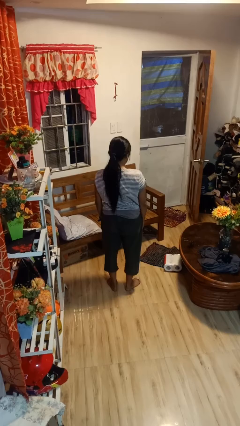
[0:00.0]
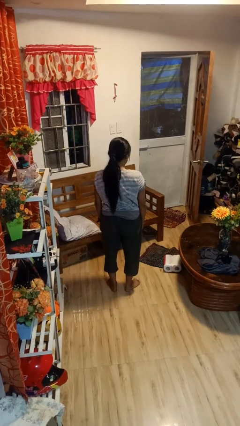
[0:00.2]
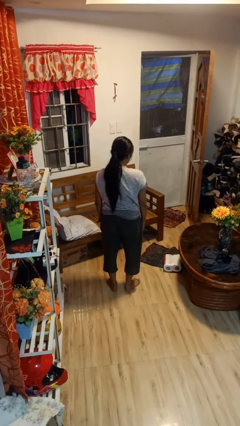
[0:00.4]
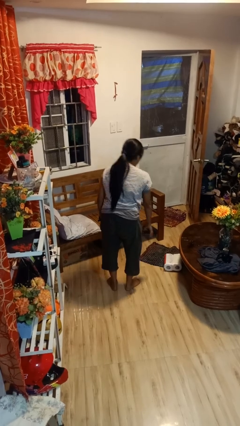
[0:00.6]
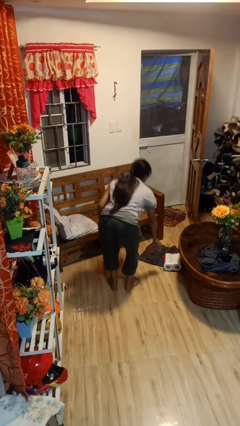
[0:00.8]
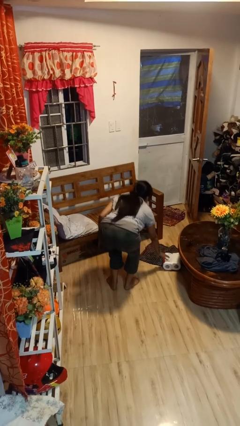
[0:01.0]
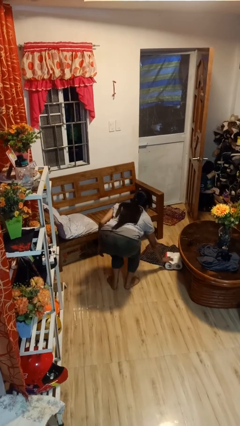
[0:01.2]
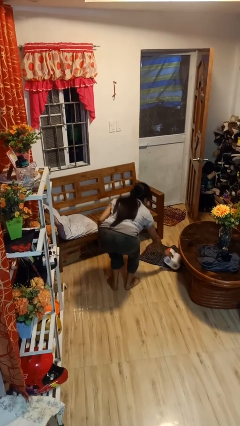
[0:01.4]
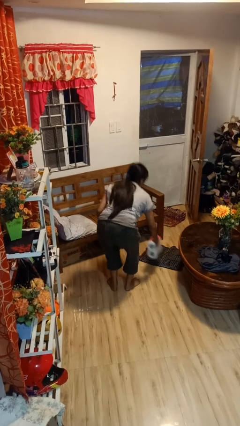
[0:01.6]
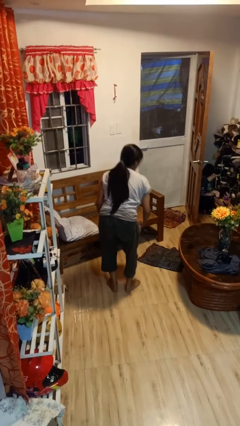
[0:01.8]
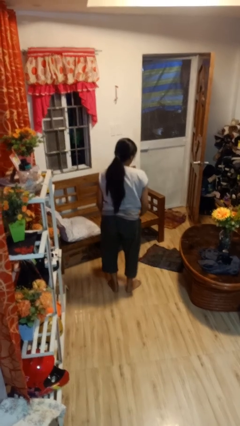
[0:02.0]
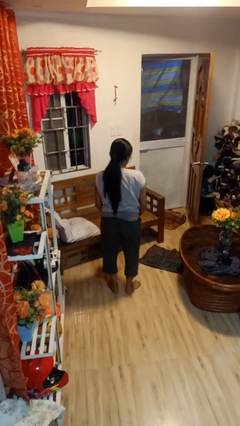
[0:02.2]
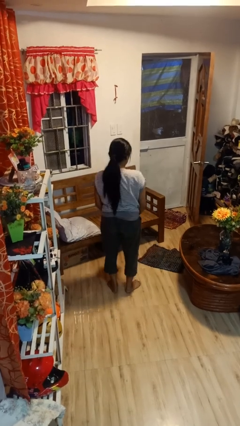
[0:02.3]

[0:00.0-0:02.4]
person picks up object from floor

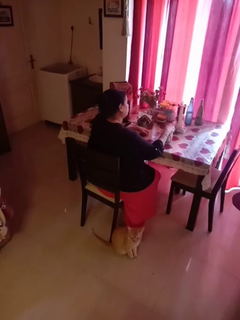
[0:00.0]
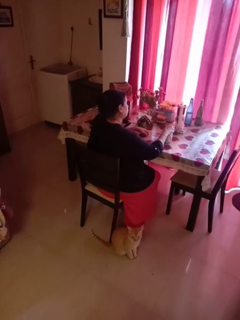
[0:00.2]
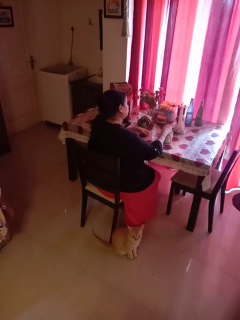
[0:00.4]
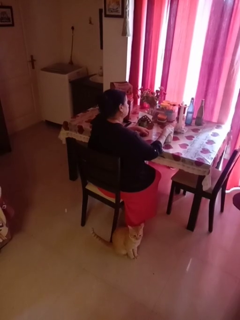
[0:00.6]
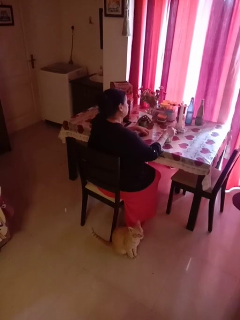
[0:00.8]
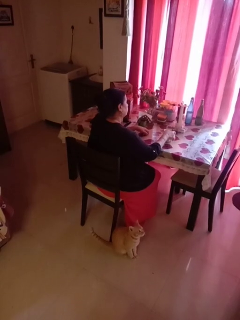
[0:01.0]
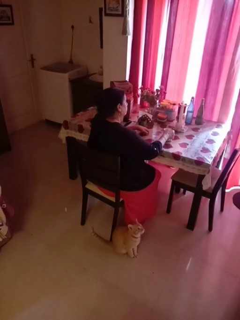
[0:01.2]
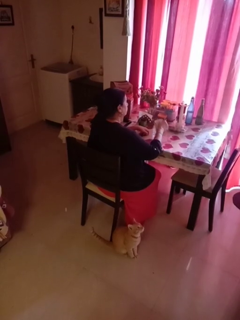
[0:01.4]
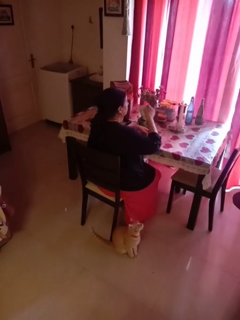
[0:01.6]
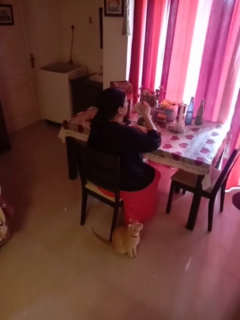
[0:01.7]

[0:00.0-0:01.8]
person stirs mug

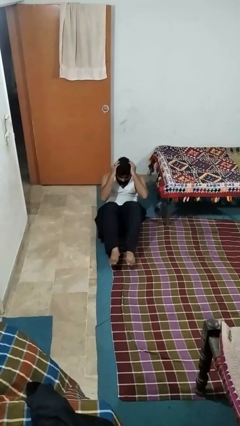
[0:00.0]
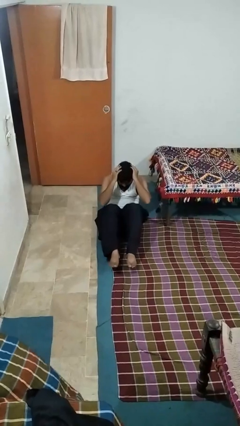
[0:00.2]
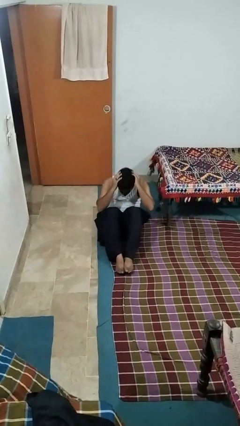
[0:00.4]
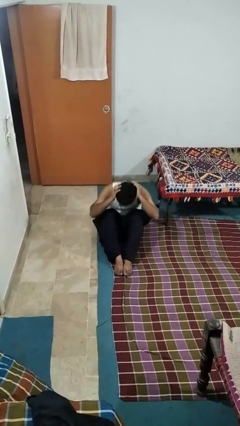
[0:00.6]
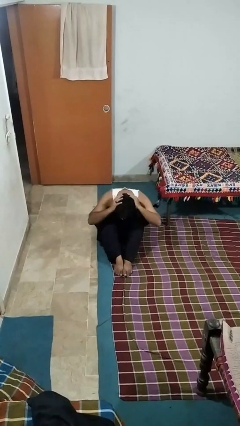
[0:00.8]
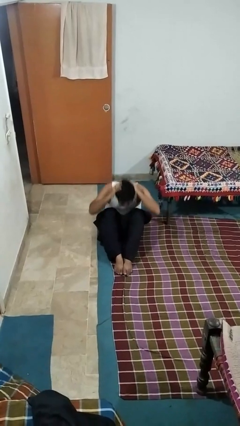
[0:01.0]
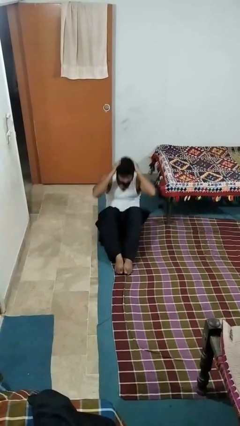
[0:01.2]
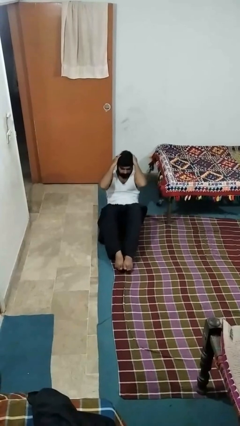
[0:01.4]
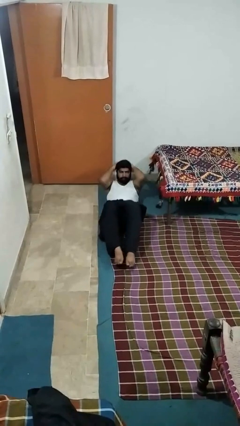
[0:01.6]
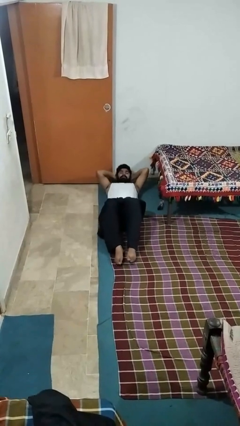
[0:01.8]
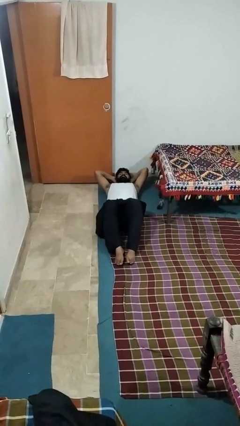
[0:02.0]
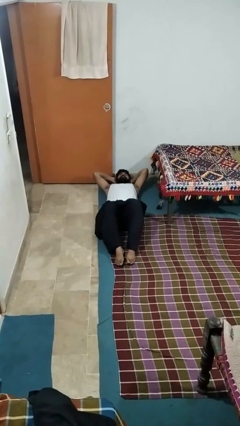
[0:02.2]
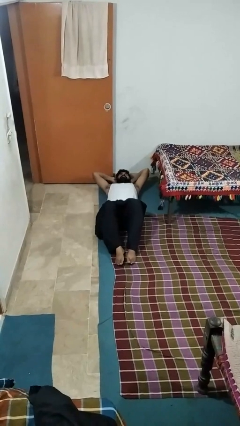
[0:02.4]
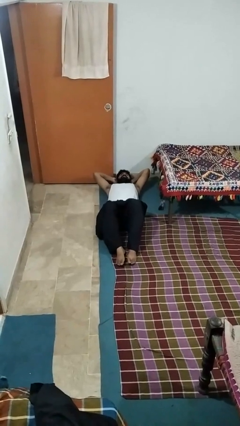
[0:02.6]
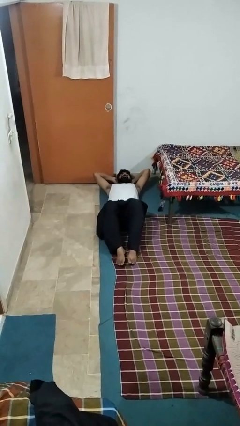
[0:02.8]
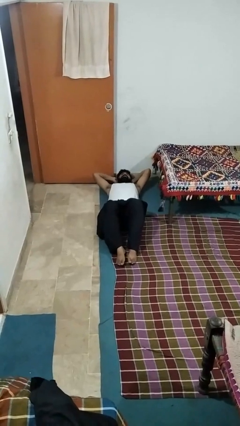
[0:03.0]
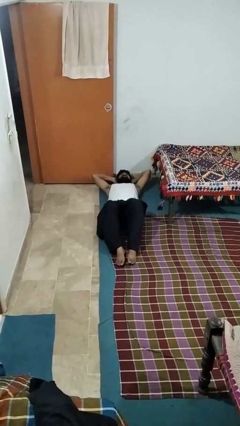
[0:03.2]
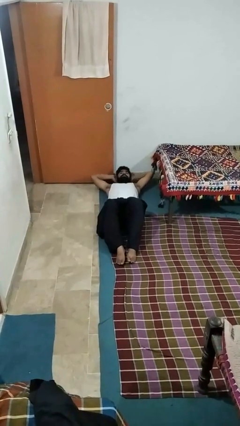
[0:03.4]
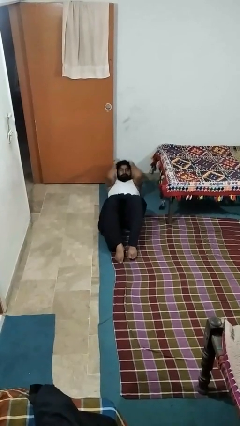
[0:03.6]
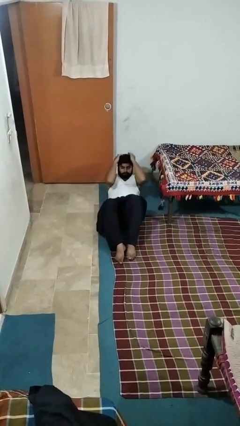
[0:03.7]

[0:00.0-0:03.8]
person exercises with situp

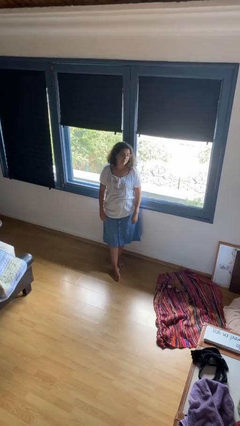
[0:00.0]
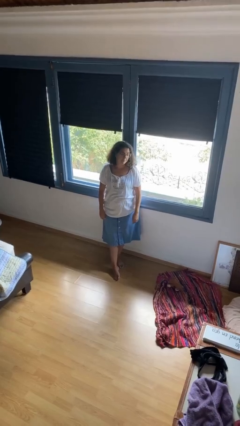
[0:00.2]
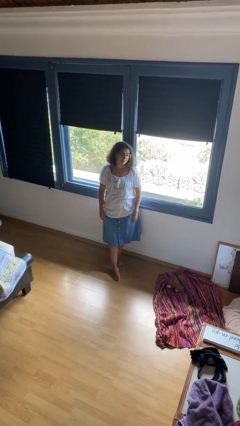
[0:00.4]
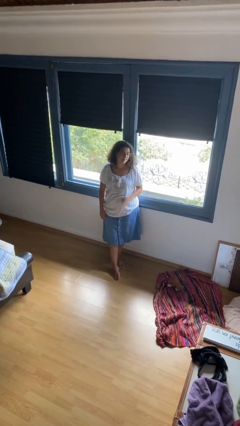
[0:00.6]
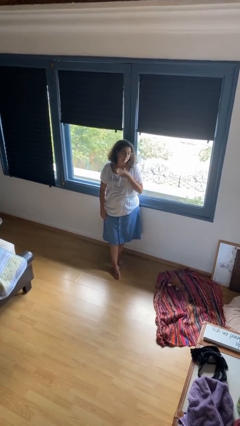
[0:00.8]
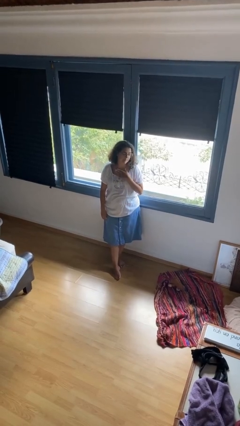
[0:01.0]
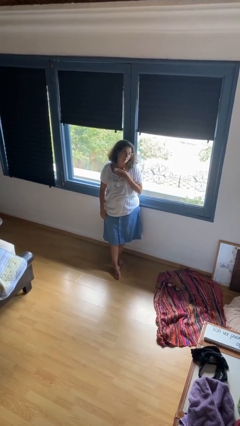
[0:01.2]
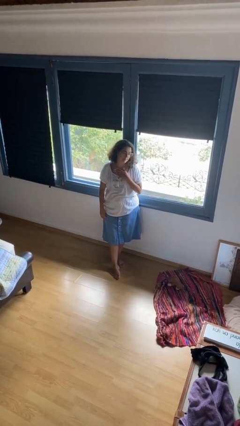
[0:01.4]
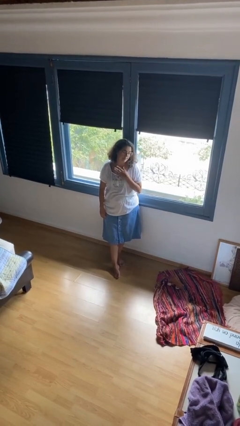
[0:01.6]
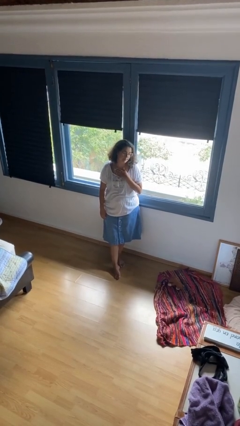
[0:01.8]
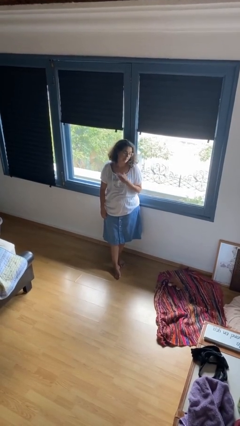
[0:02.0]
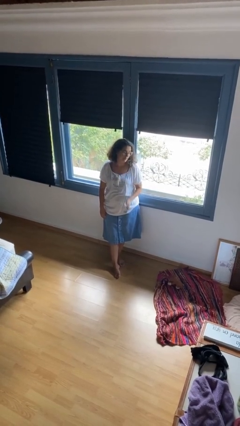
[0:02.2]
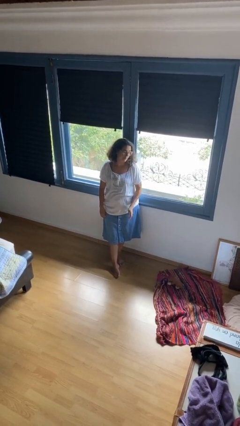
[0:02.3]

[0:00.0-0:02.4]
person drums on chest

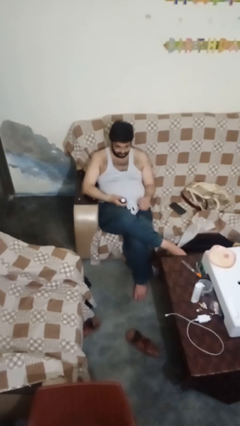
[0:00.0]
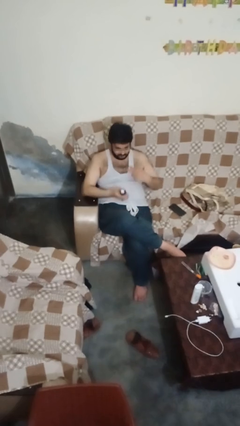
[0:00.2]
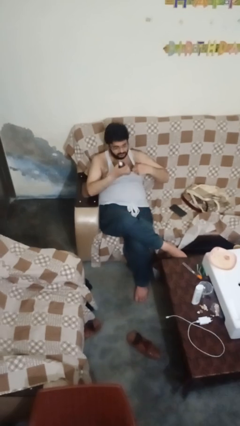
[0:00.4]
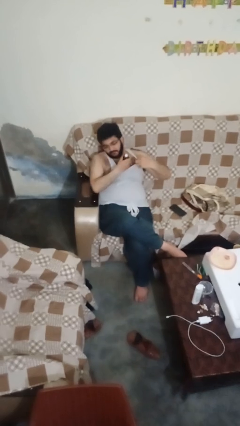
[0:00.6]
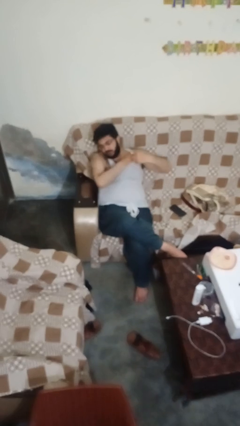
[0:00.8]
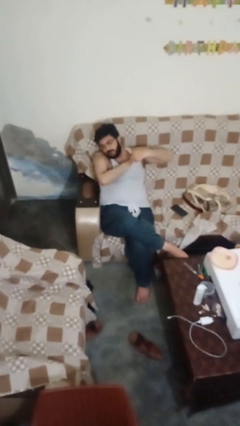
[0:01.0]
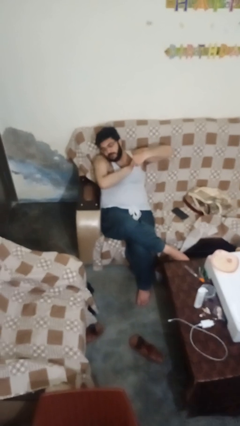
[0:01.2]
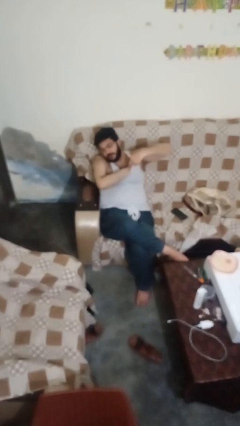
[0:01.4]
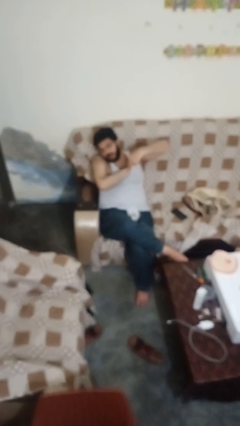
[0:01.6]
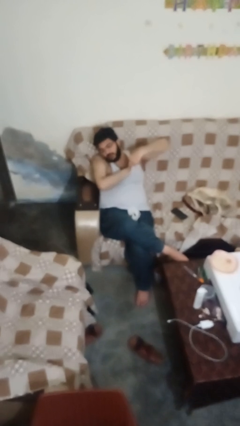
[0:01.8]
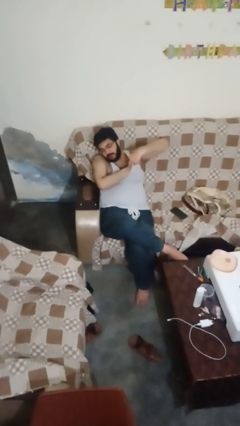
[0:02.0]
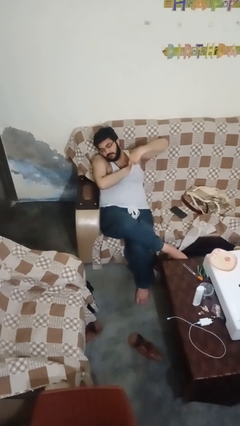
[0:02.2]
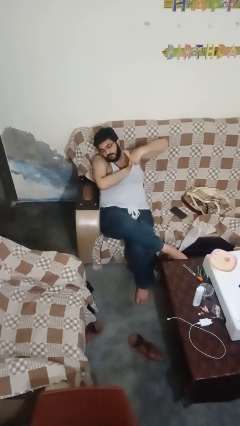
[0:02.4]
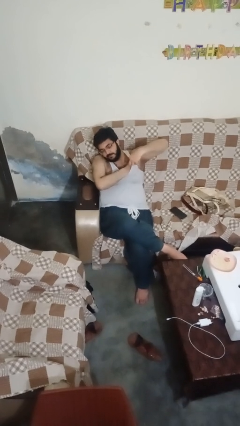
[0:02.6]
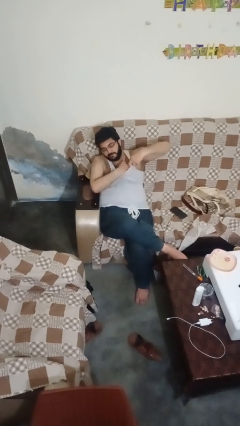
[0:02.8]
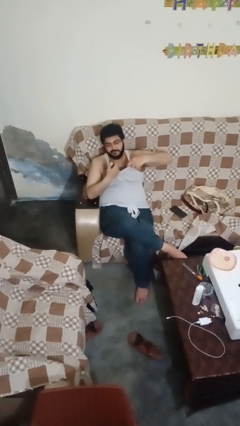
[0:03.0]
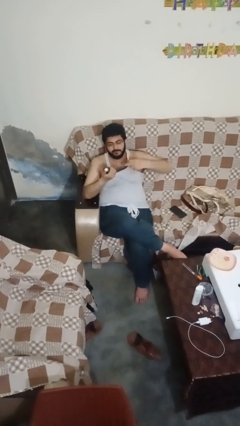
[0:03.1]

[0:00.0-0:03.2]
person applies deodorant

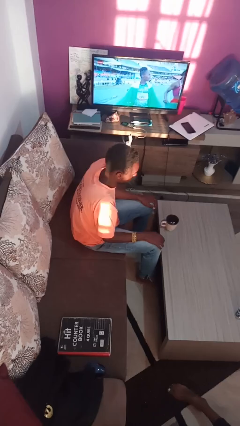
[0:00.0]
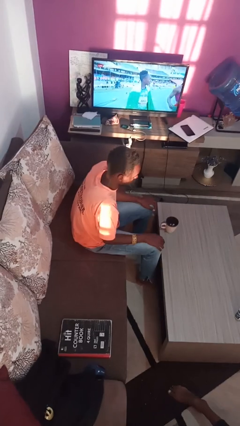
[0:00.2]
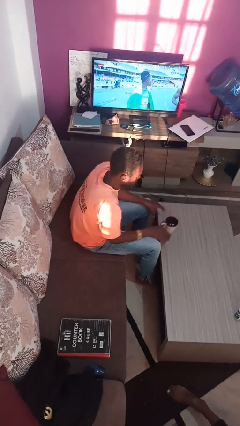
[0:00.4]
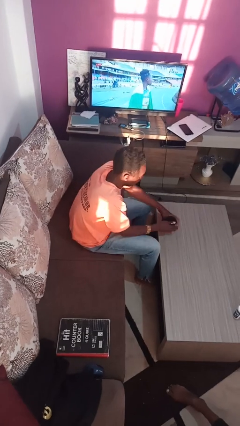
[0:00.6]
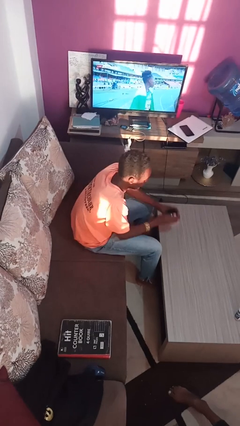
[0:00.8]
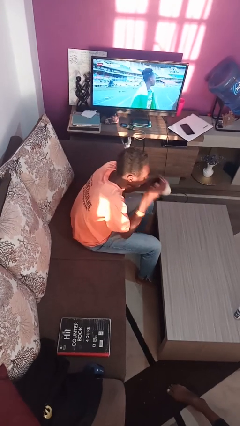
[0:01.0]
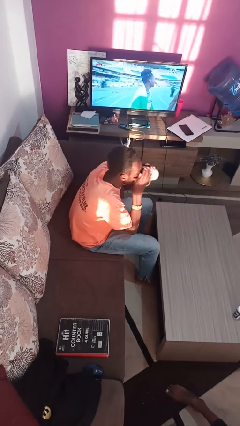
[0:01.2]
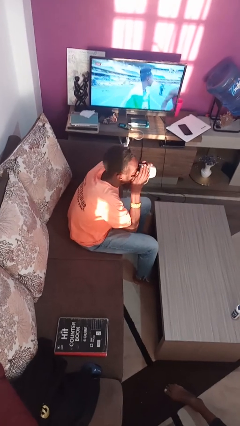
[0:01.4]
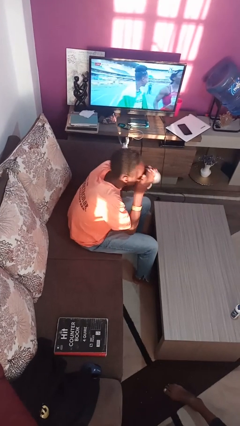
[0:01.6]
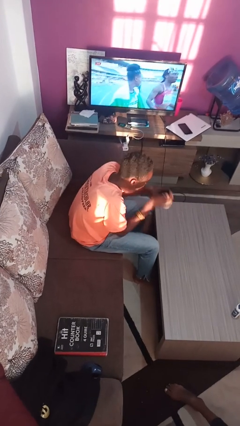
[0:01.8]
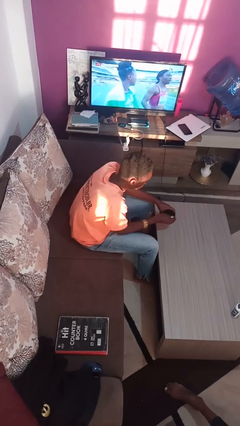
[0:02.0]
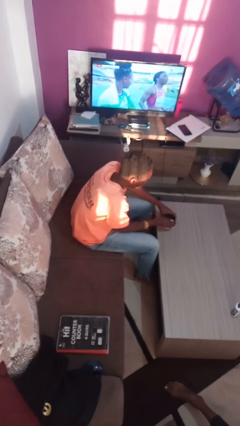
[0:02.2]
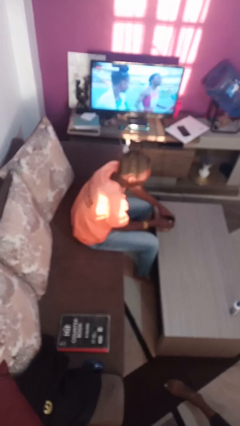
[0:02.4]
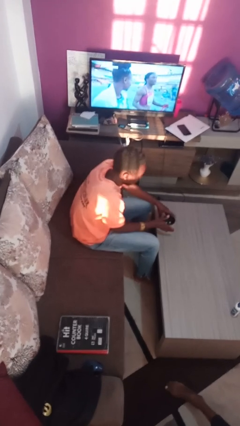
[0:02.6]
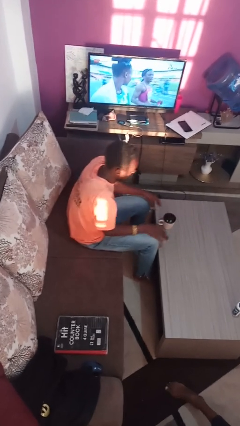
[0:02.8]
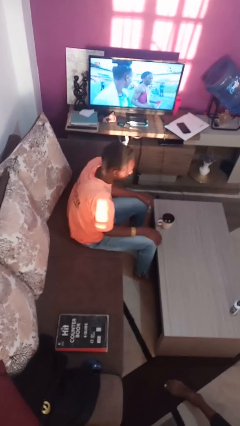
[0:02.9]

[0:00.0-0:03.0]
person drinks from mug

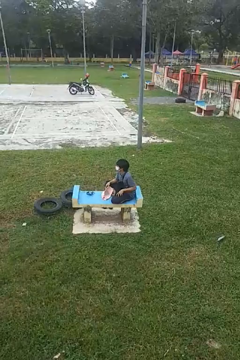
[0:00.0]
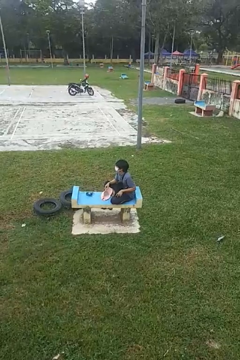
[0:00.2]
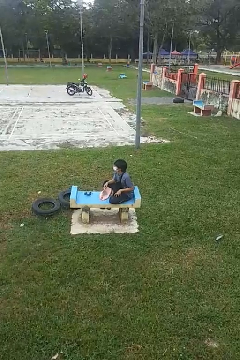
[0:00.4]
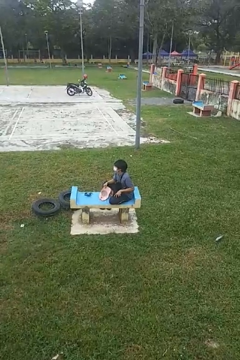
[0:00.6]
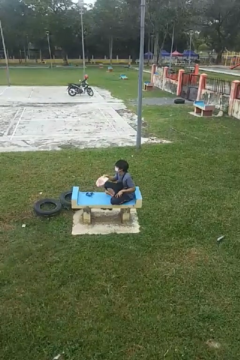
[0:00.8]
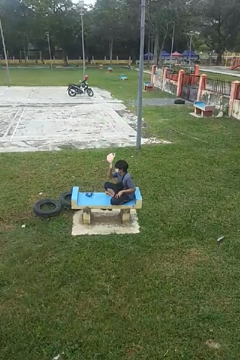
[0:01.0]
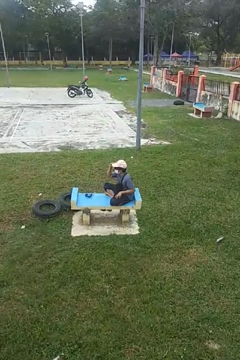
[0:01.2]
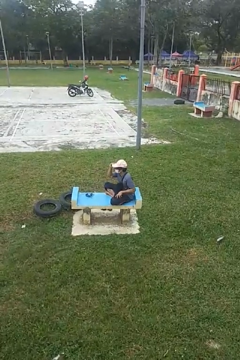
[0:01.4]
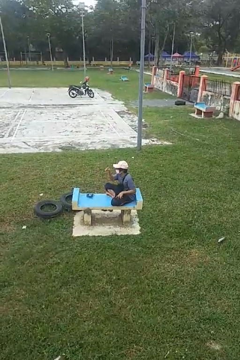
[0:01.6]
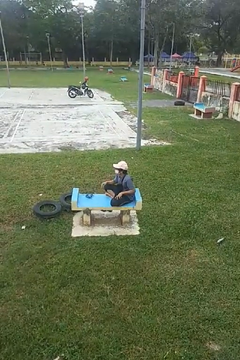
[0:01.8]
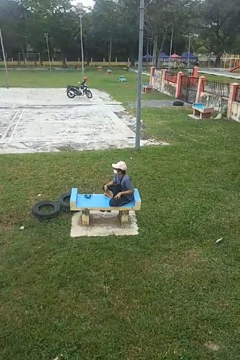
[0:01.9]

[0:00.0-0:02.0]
person puts on hat
